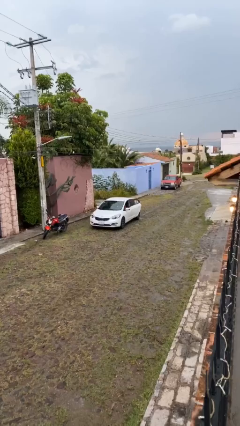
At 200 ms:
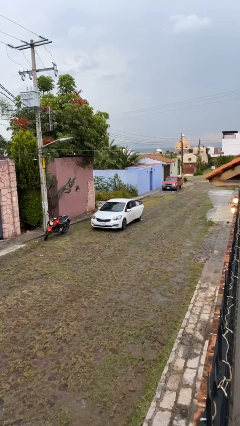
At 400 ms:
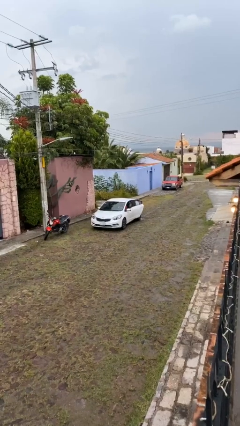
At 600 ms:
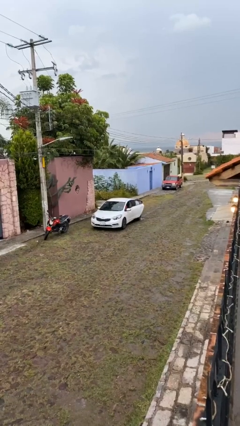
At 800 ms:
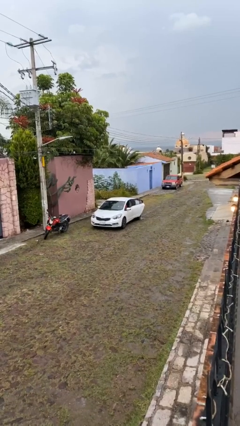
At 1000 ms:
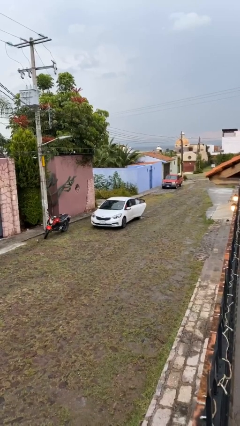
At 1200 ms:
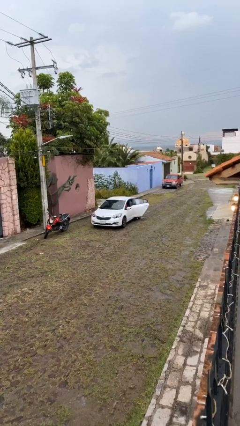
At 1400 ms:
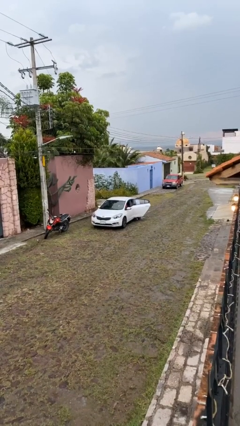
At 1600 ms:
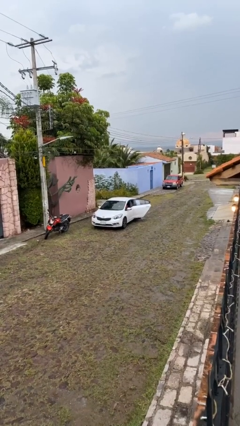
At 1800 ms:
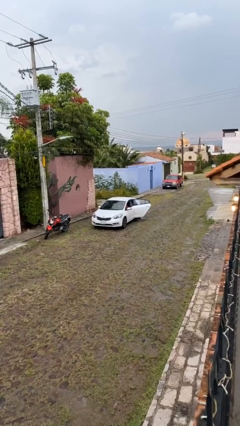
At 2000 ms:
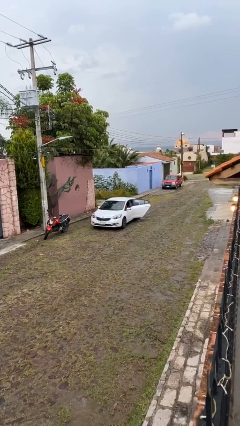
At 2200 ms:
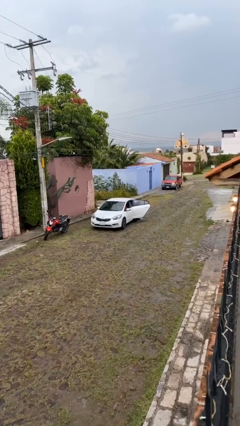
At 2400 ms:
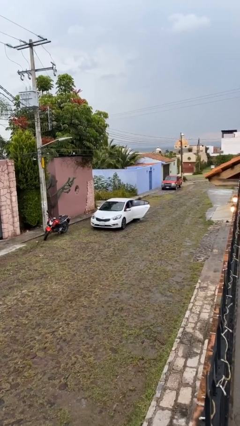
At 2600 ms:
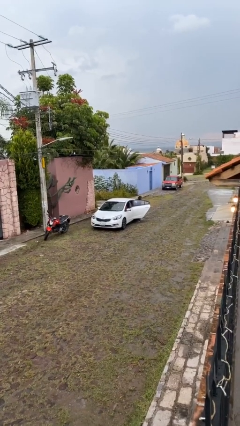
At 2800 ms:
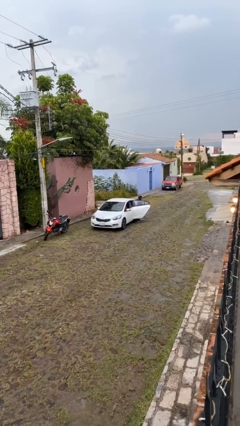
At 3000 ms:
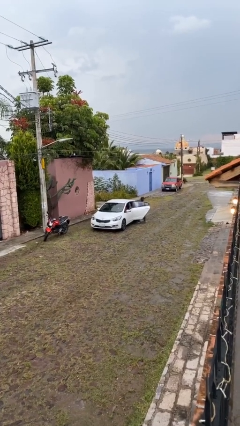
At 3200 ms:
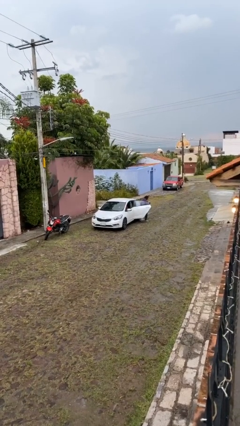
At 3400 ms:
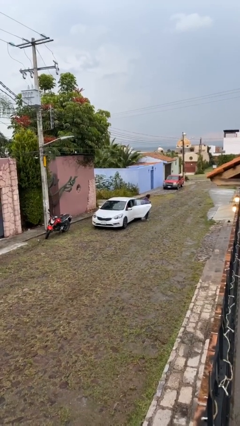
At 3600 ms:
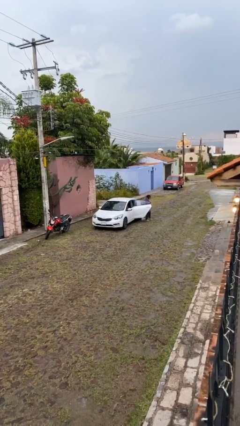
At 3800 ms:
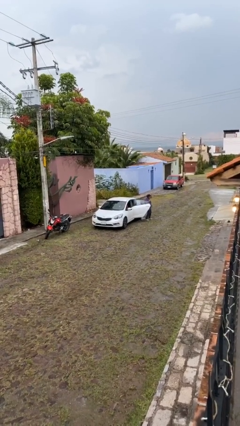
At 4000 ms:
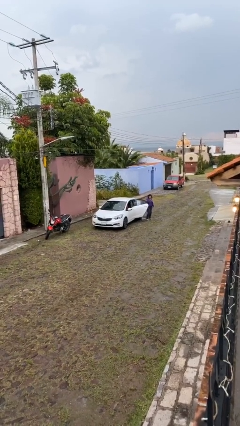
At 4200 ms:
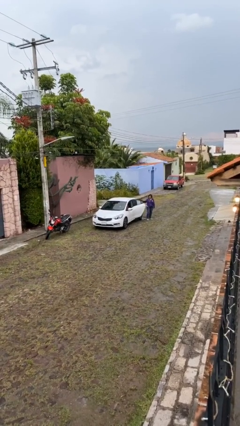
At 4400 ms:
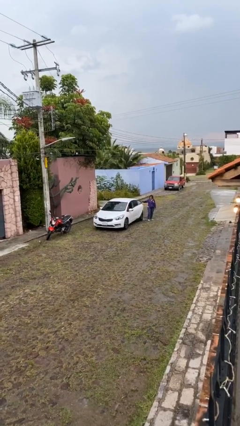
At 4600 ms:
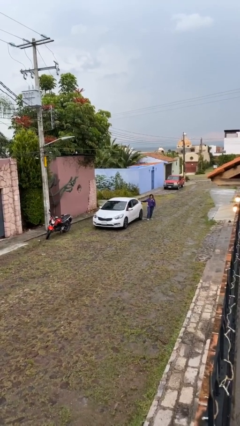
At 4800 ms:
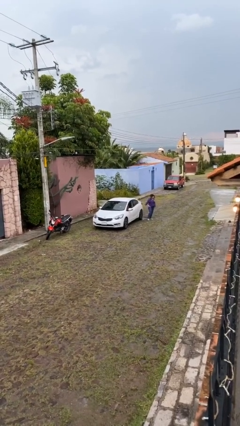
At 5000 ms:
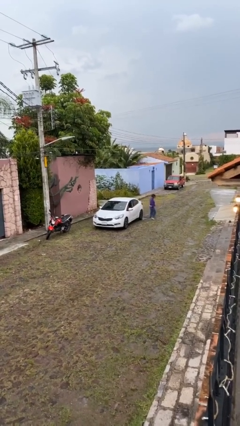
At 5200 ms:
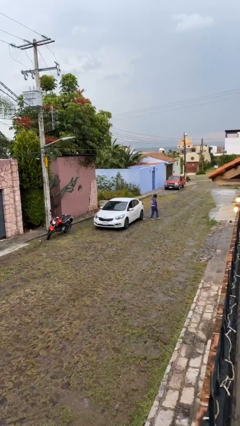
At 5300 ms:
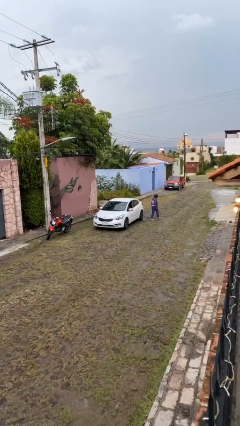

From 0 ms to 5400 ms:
car drops off person

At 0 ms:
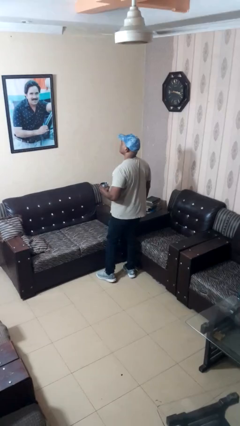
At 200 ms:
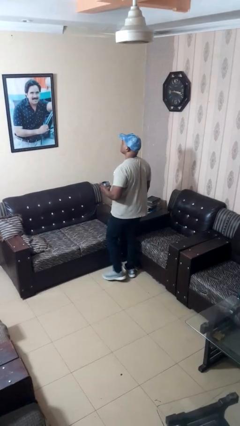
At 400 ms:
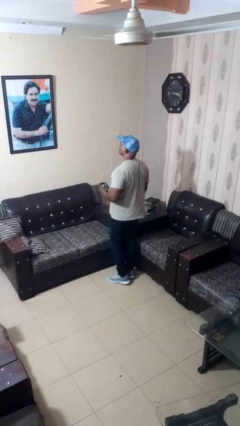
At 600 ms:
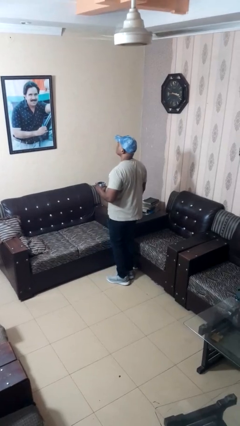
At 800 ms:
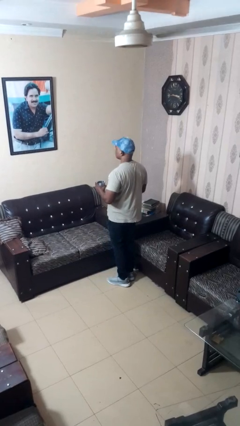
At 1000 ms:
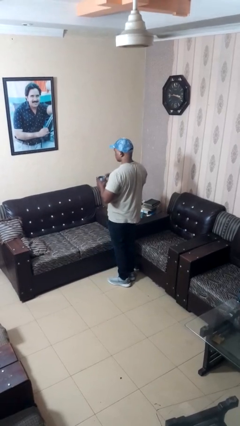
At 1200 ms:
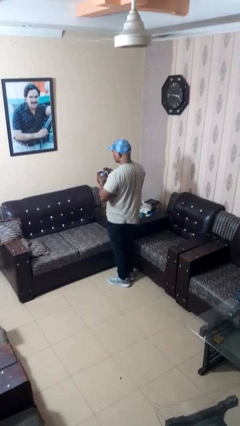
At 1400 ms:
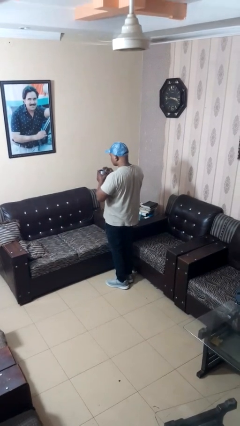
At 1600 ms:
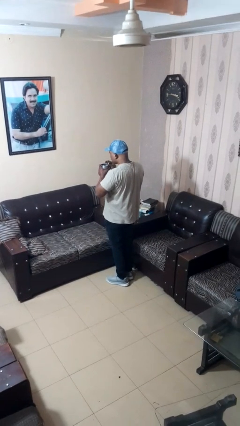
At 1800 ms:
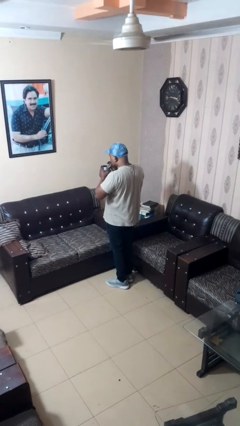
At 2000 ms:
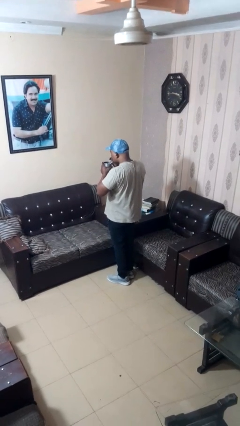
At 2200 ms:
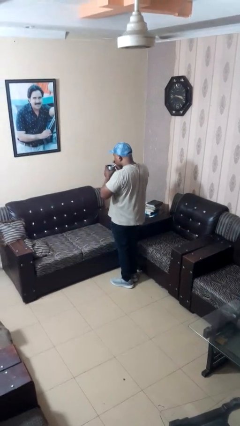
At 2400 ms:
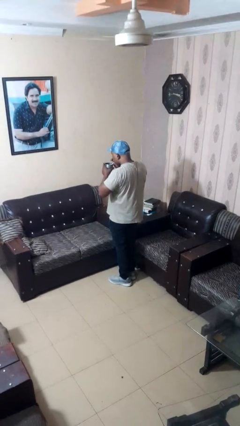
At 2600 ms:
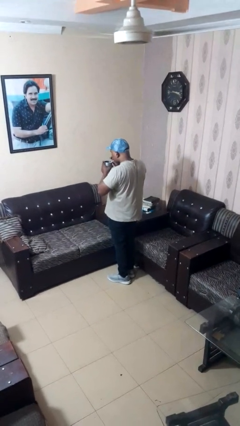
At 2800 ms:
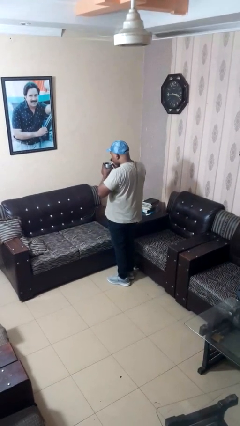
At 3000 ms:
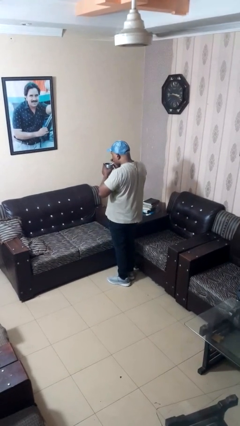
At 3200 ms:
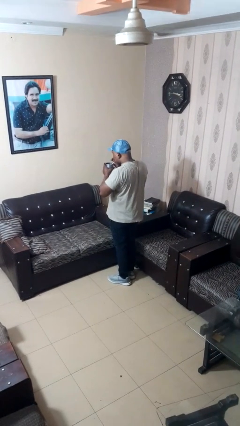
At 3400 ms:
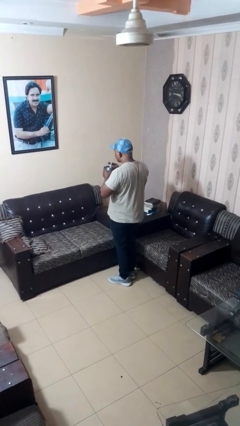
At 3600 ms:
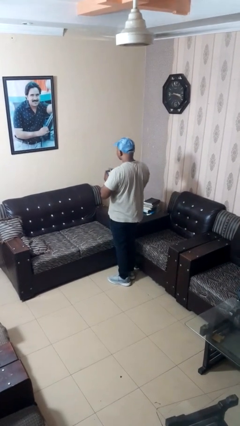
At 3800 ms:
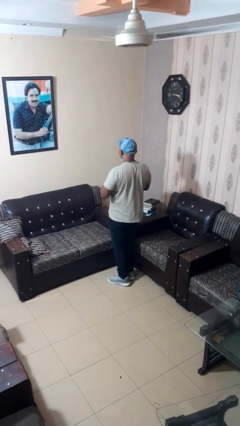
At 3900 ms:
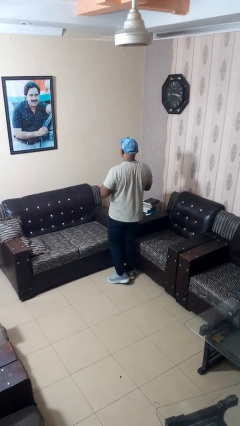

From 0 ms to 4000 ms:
person drinks from straw

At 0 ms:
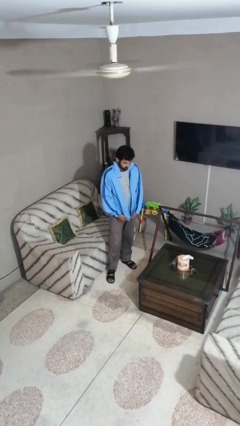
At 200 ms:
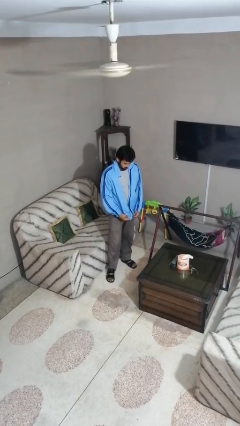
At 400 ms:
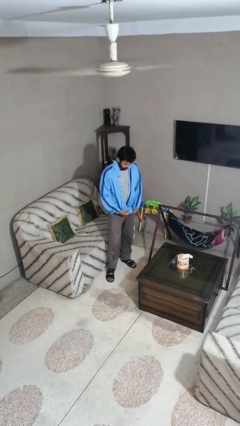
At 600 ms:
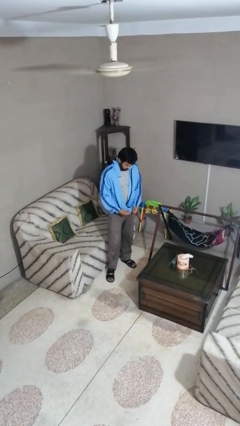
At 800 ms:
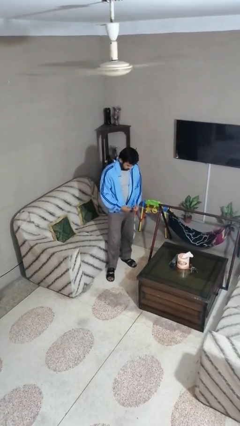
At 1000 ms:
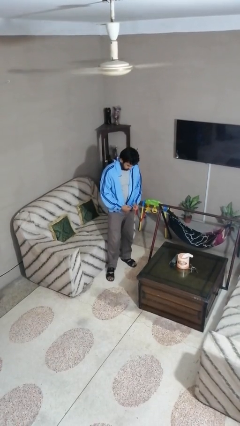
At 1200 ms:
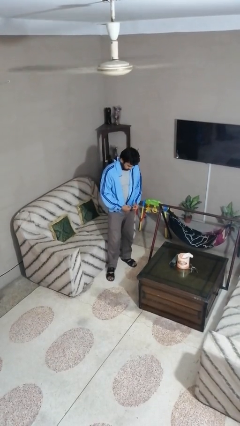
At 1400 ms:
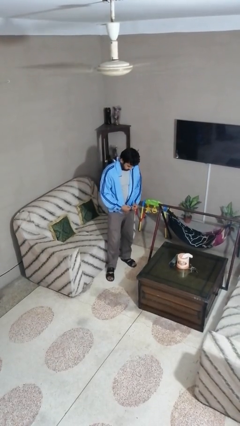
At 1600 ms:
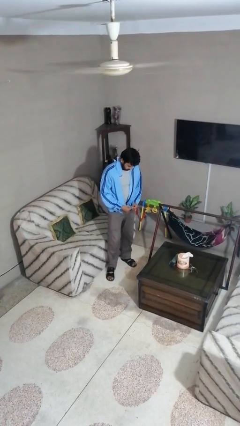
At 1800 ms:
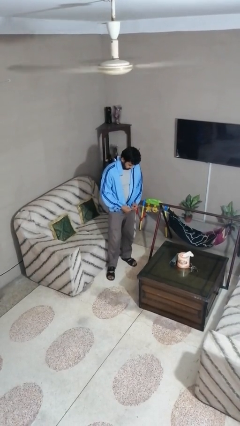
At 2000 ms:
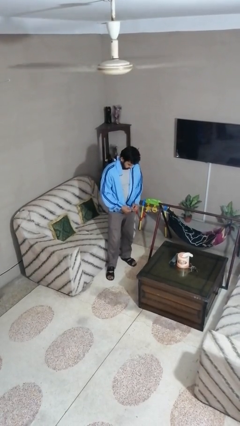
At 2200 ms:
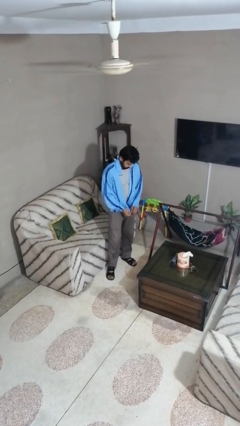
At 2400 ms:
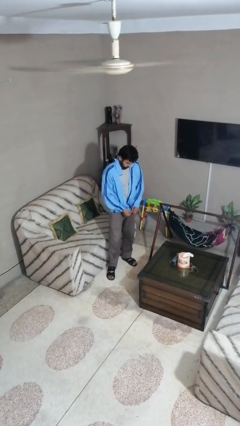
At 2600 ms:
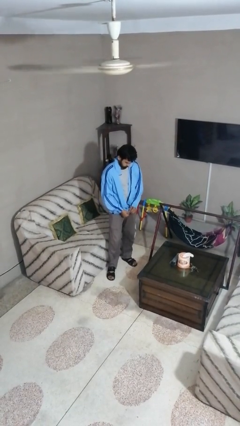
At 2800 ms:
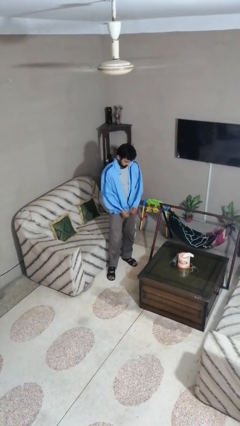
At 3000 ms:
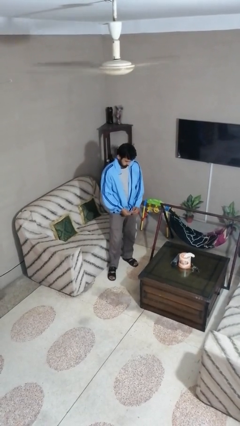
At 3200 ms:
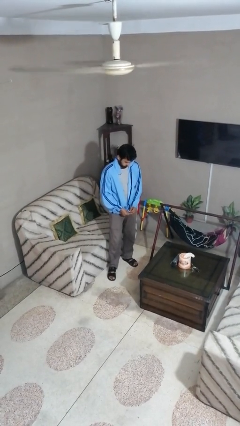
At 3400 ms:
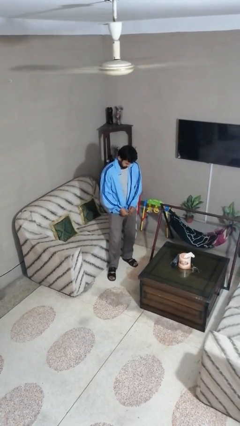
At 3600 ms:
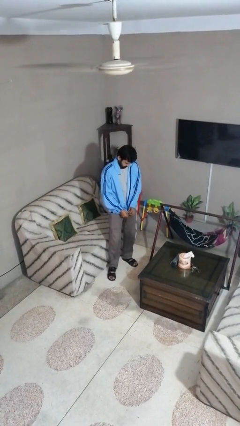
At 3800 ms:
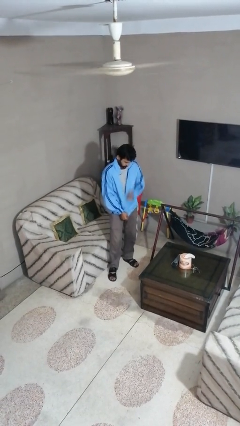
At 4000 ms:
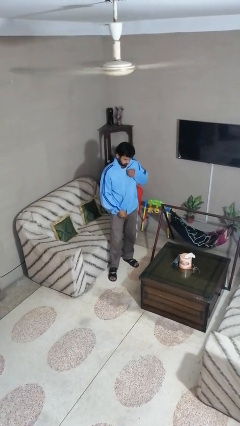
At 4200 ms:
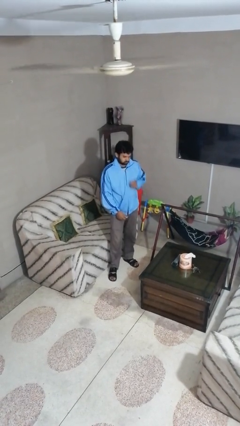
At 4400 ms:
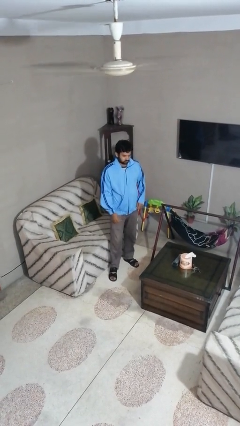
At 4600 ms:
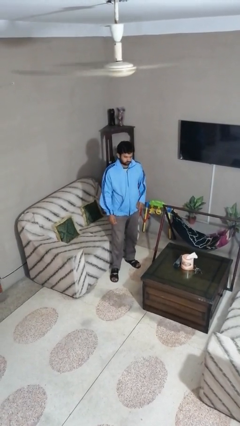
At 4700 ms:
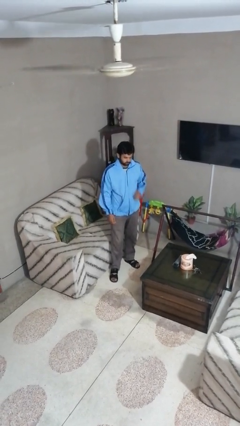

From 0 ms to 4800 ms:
person zips up jacket

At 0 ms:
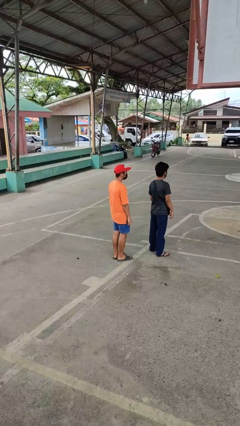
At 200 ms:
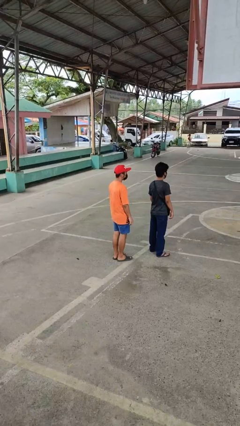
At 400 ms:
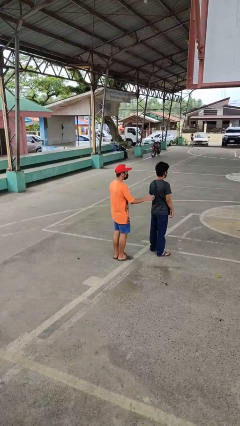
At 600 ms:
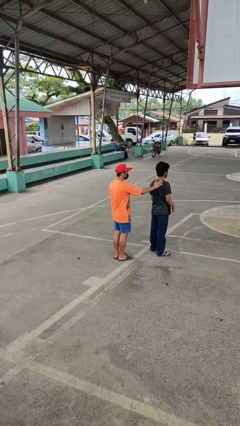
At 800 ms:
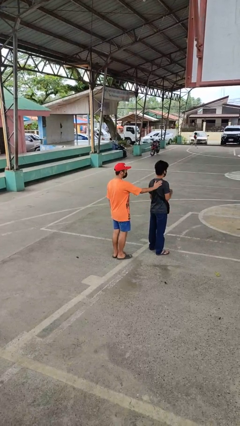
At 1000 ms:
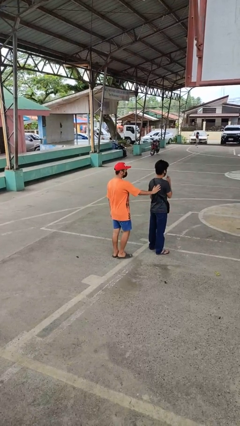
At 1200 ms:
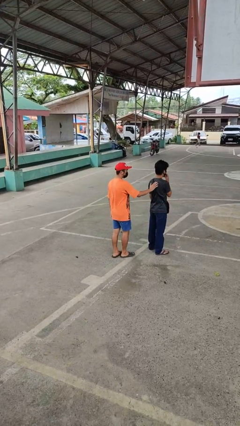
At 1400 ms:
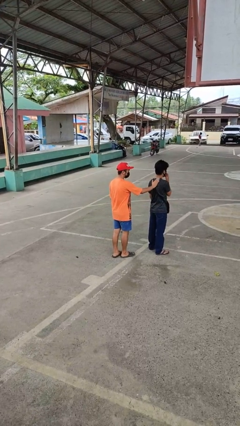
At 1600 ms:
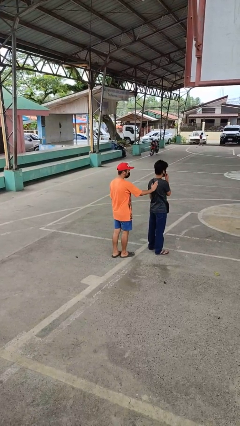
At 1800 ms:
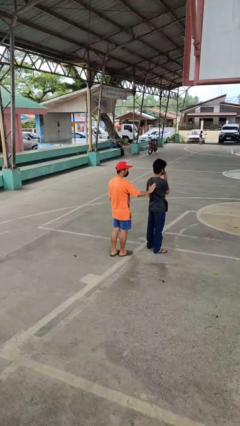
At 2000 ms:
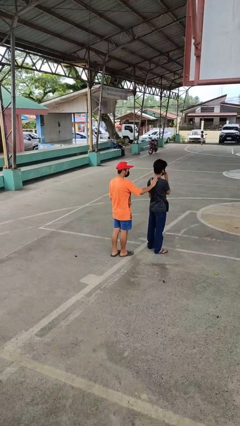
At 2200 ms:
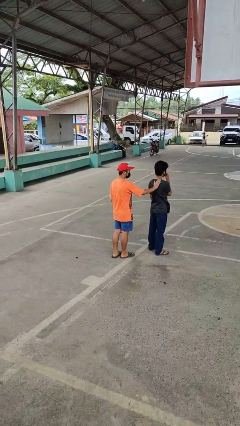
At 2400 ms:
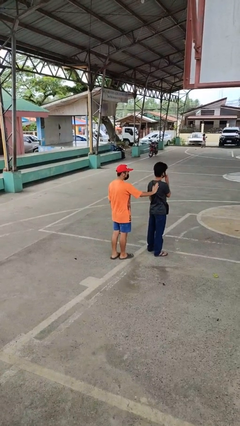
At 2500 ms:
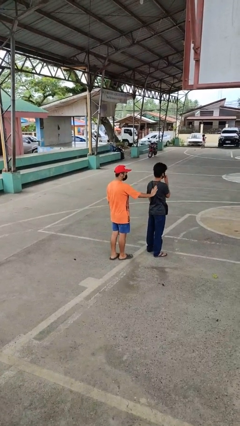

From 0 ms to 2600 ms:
person touches back of person

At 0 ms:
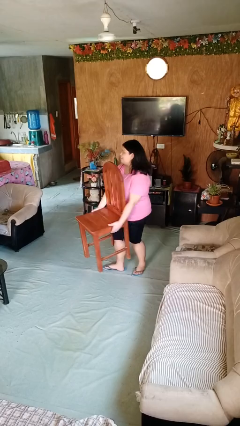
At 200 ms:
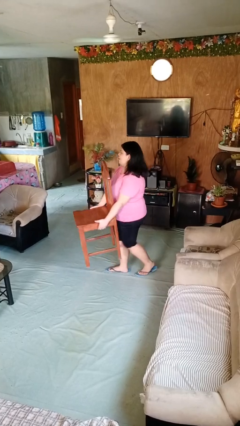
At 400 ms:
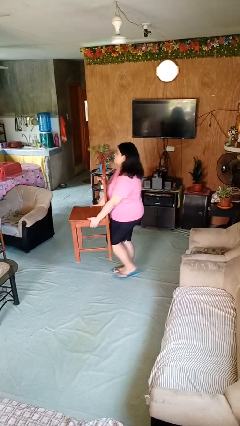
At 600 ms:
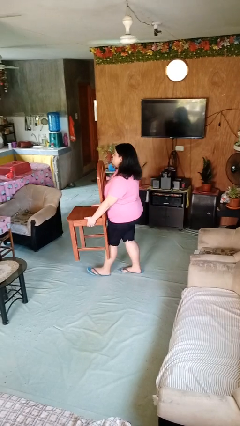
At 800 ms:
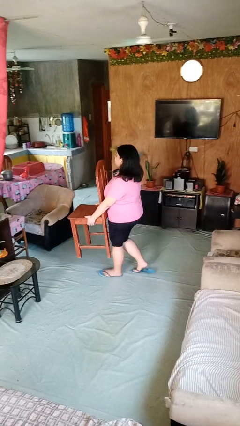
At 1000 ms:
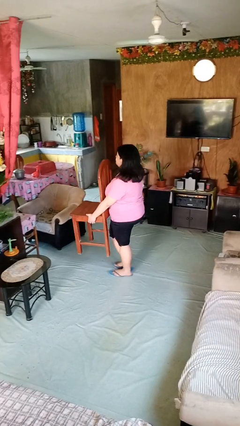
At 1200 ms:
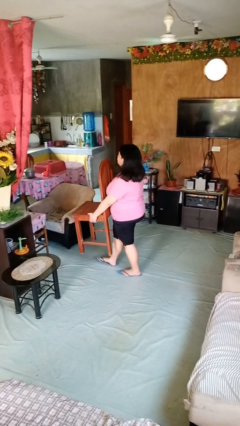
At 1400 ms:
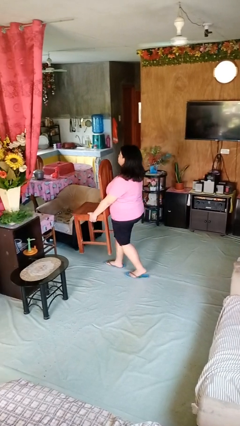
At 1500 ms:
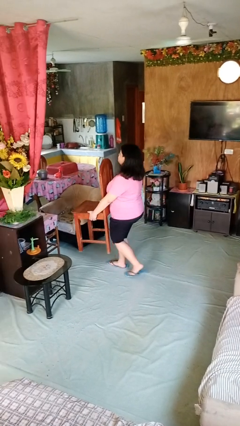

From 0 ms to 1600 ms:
person carries furniture
